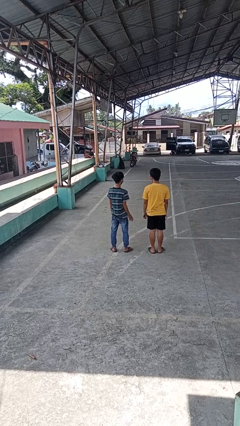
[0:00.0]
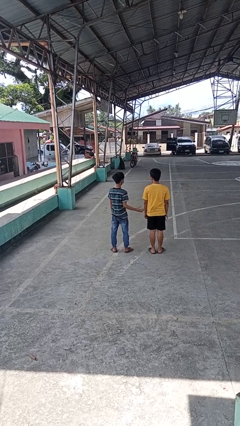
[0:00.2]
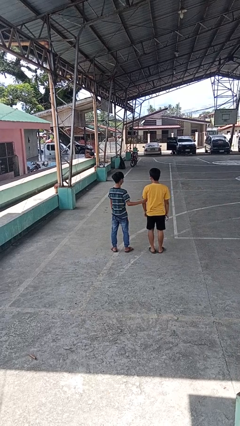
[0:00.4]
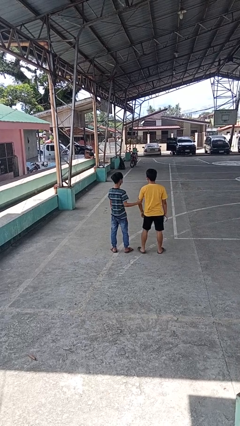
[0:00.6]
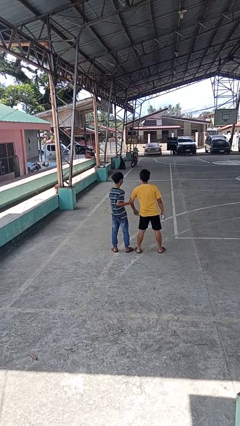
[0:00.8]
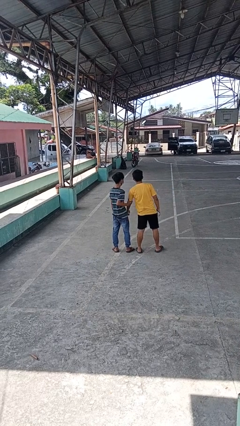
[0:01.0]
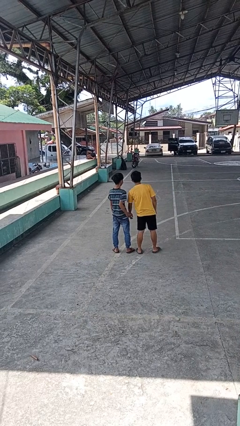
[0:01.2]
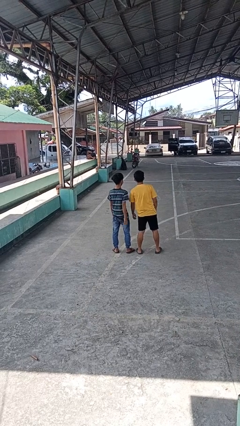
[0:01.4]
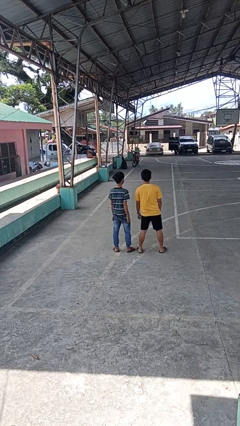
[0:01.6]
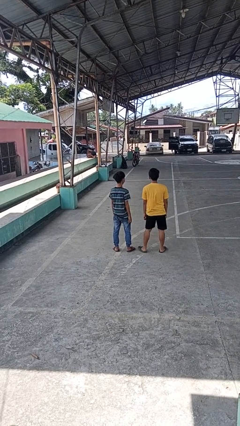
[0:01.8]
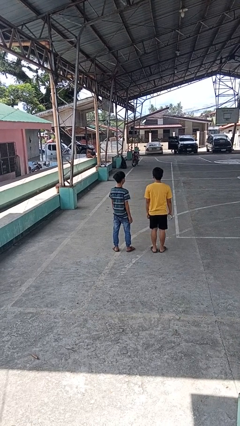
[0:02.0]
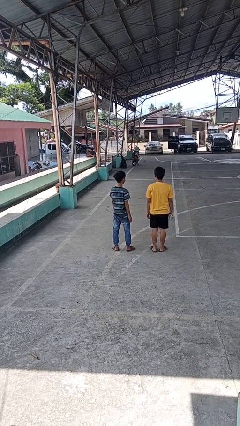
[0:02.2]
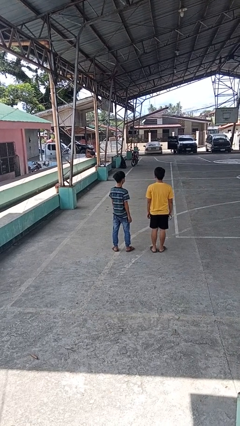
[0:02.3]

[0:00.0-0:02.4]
person grabs person by bicep

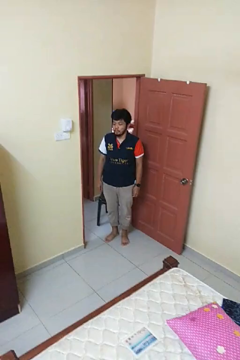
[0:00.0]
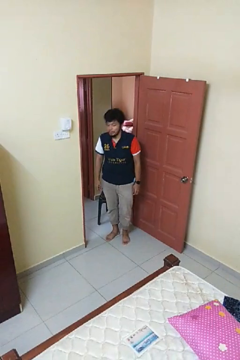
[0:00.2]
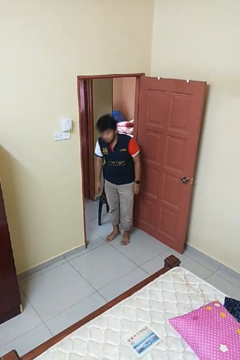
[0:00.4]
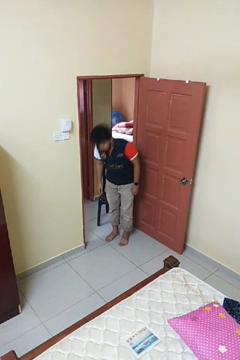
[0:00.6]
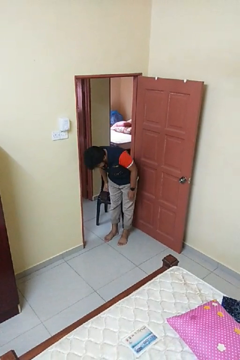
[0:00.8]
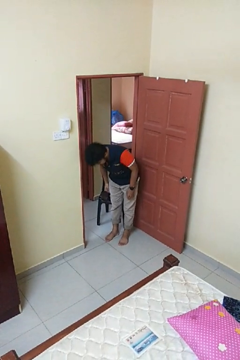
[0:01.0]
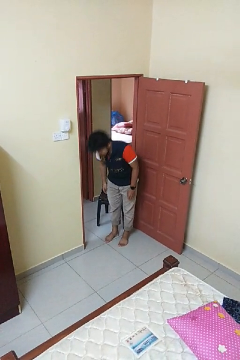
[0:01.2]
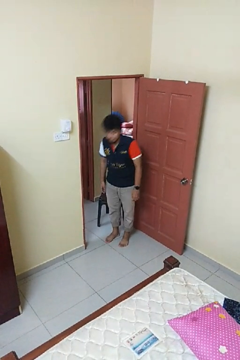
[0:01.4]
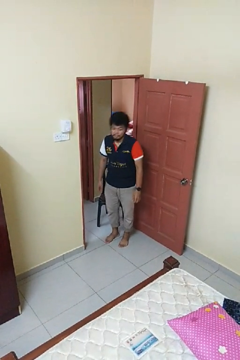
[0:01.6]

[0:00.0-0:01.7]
person bows

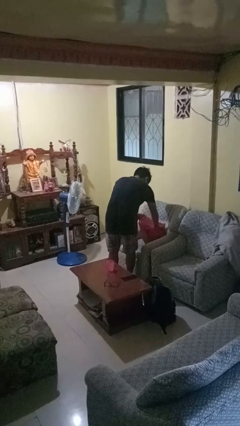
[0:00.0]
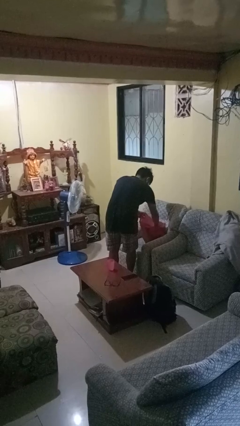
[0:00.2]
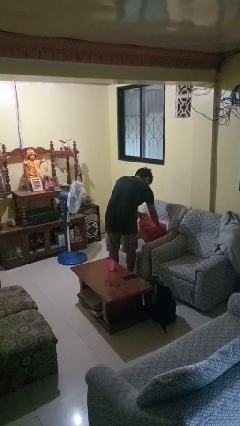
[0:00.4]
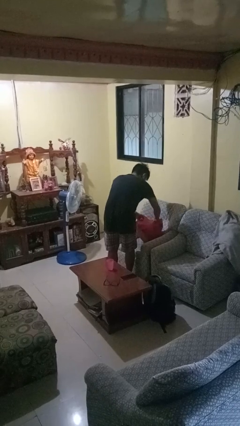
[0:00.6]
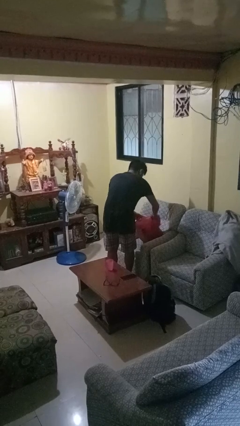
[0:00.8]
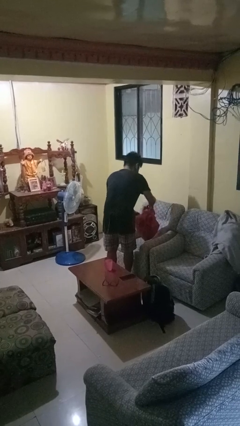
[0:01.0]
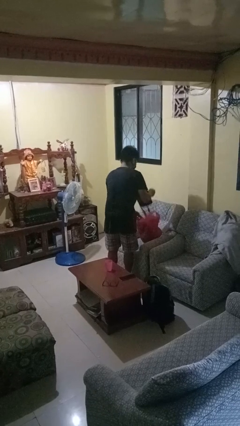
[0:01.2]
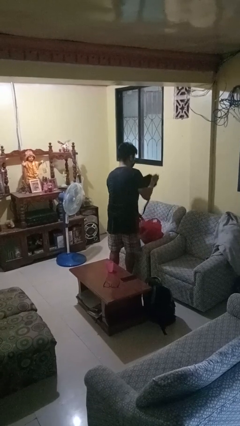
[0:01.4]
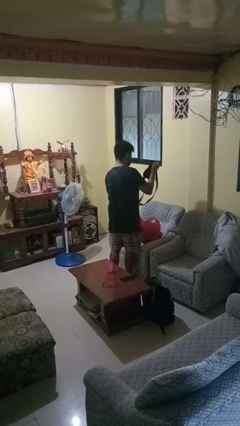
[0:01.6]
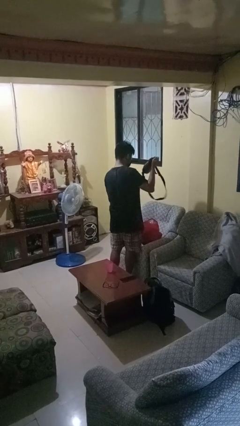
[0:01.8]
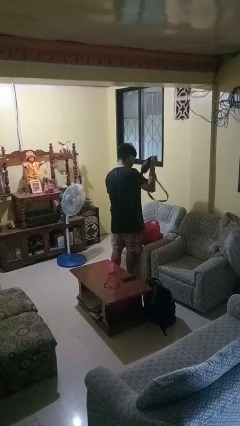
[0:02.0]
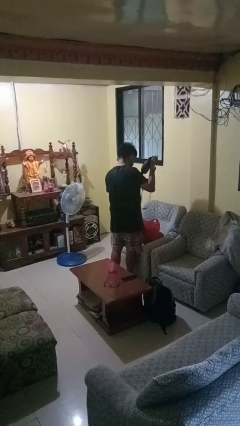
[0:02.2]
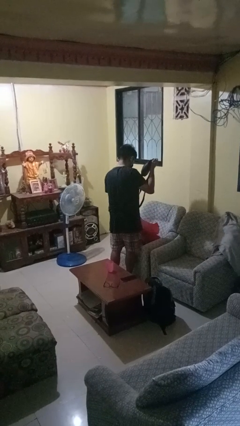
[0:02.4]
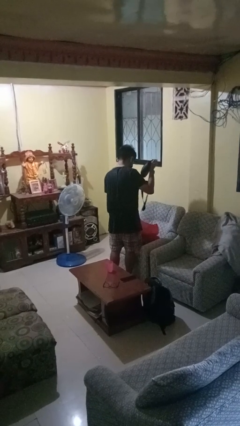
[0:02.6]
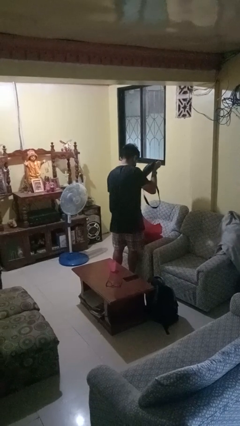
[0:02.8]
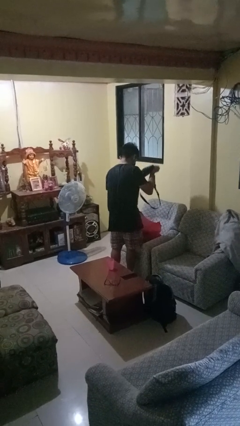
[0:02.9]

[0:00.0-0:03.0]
person takes object from bag

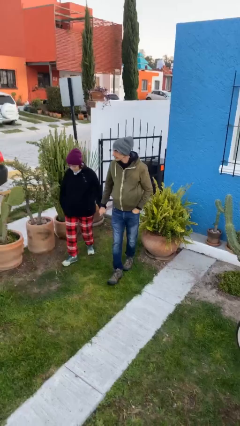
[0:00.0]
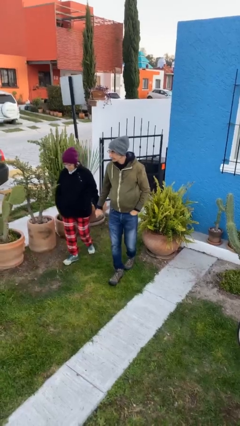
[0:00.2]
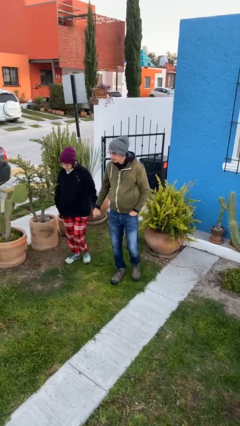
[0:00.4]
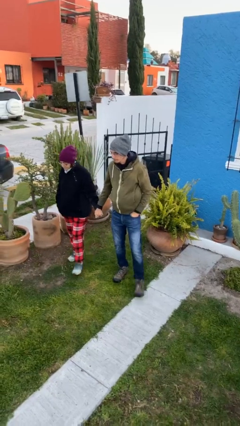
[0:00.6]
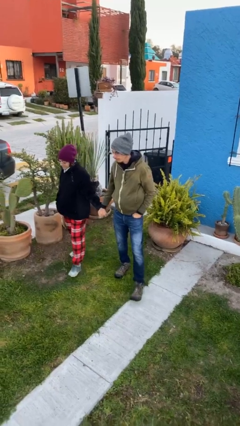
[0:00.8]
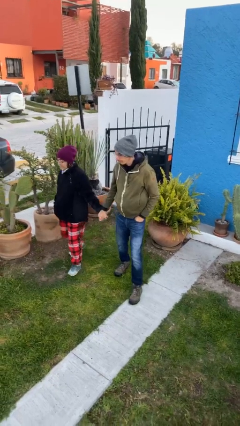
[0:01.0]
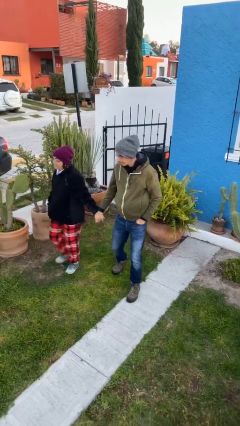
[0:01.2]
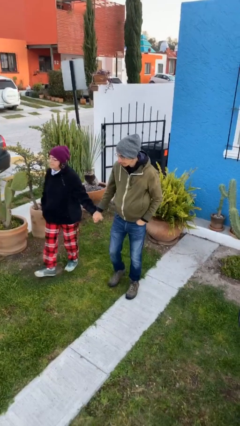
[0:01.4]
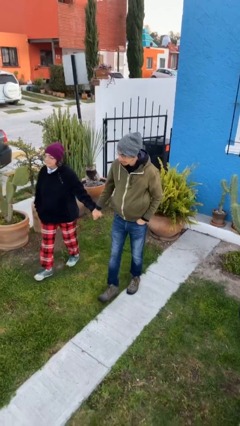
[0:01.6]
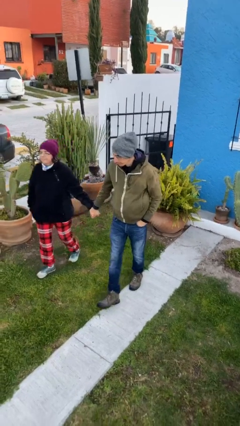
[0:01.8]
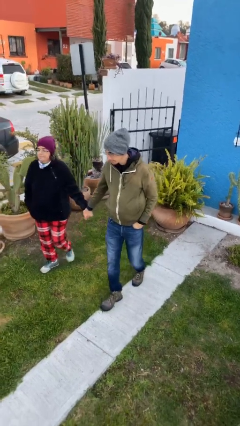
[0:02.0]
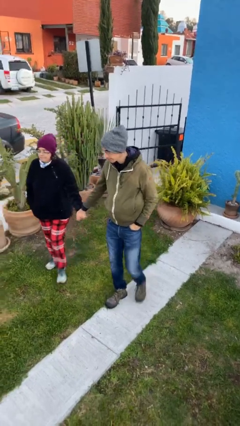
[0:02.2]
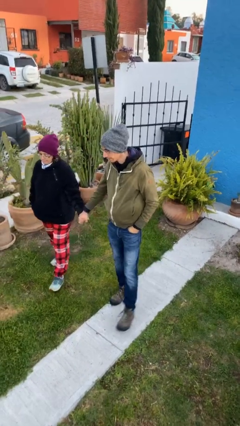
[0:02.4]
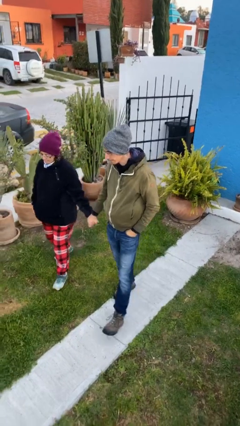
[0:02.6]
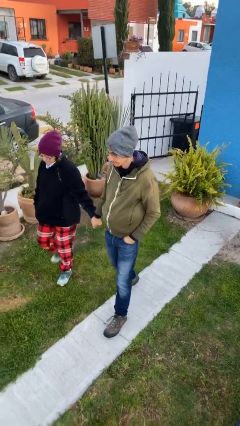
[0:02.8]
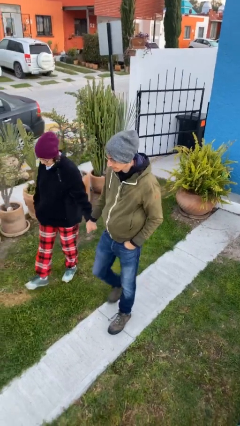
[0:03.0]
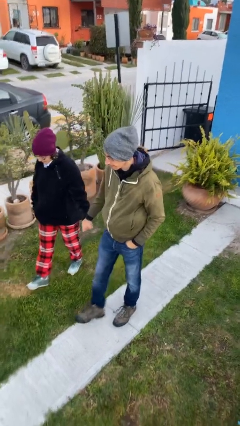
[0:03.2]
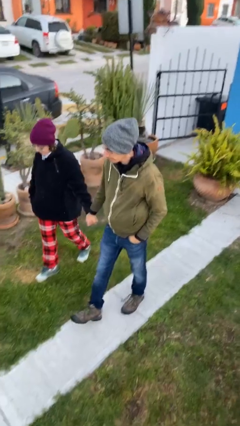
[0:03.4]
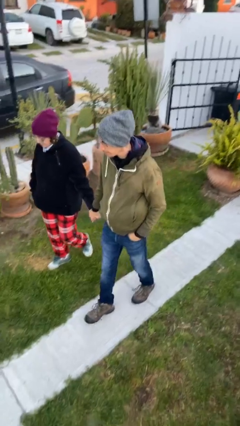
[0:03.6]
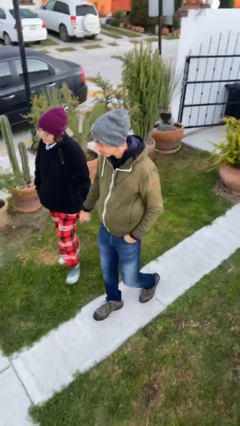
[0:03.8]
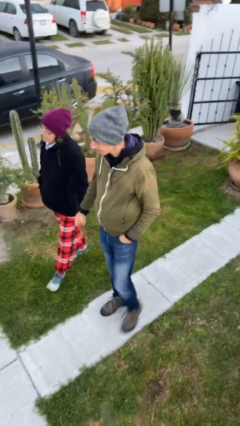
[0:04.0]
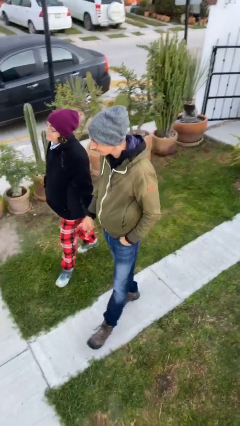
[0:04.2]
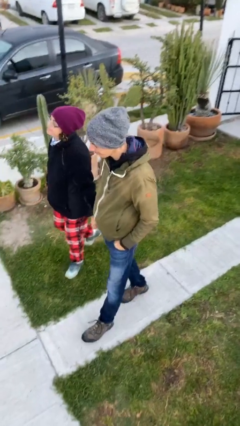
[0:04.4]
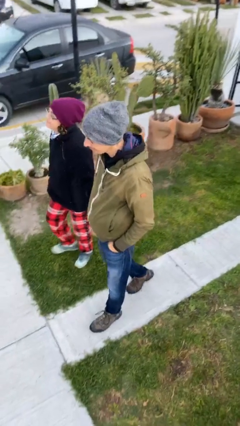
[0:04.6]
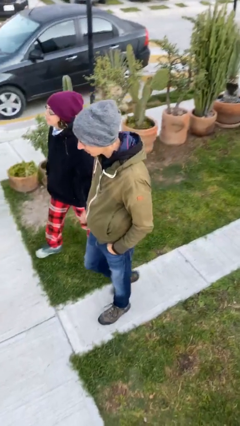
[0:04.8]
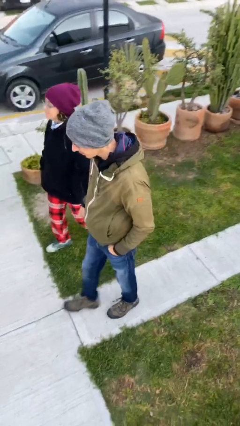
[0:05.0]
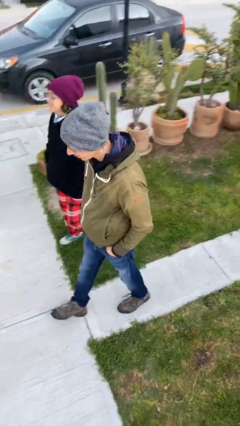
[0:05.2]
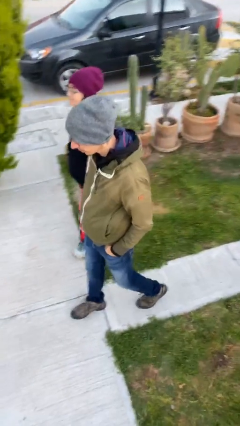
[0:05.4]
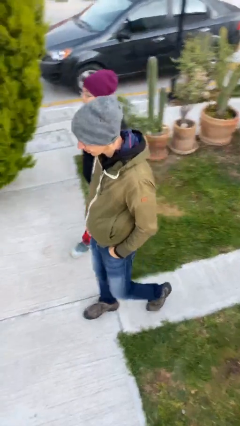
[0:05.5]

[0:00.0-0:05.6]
person holds hand

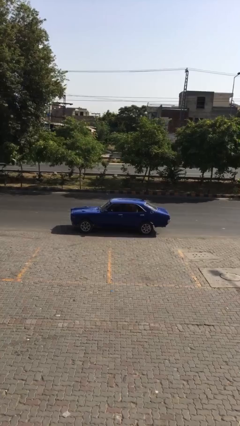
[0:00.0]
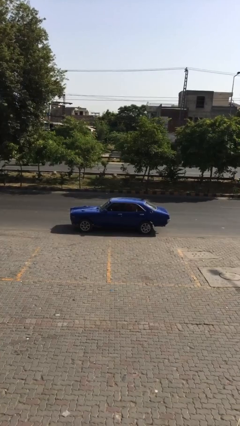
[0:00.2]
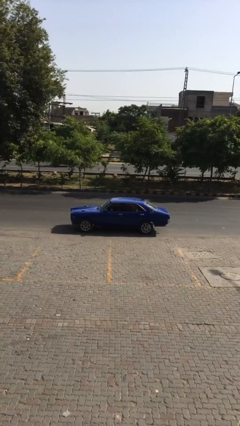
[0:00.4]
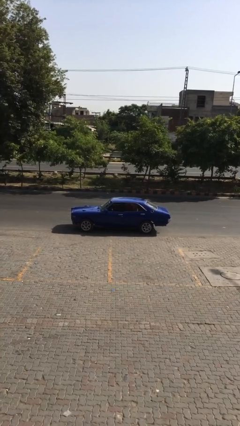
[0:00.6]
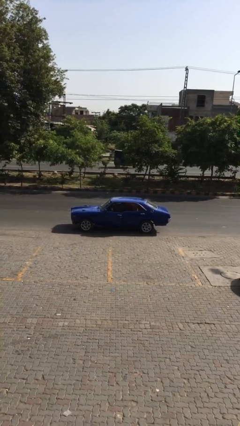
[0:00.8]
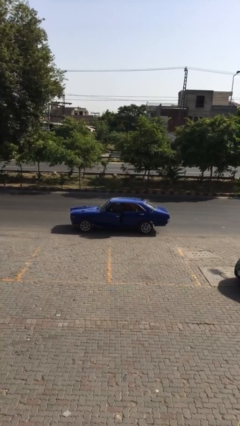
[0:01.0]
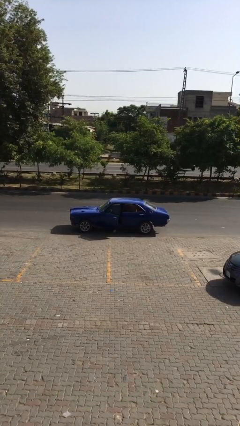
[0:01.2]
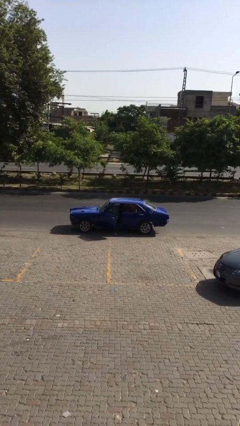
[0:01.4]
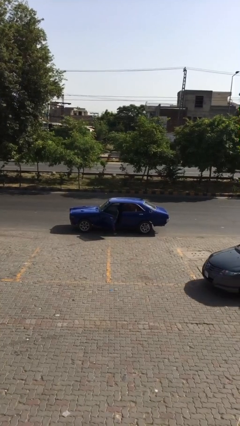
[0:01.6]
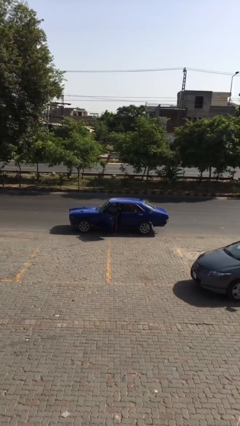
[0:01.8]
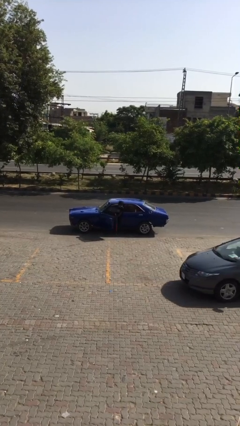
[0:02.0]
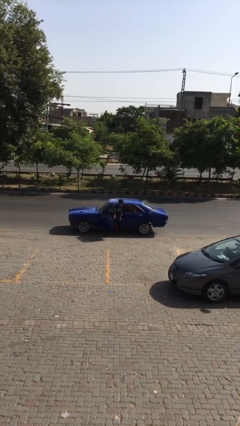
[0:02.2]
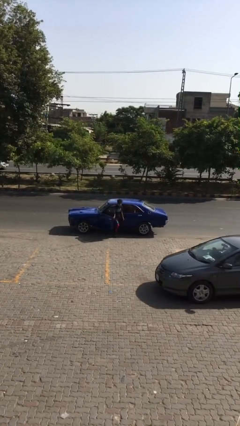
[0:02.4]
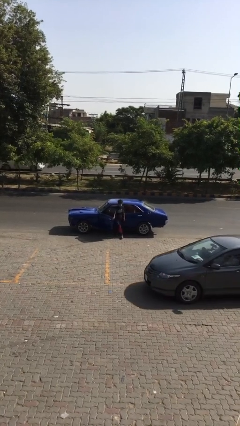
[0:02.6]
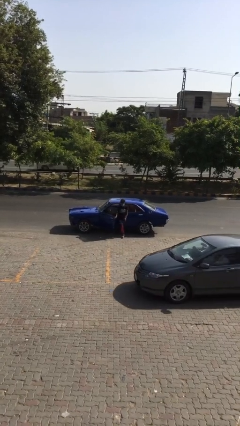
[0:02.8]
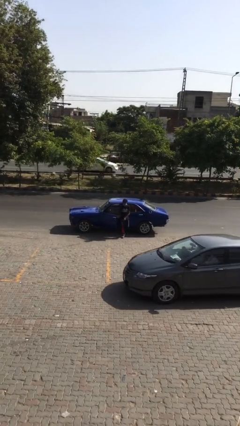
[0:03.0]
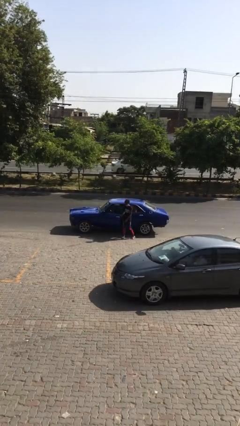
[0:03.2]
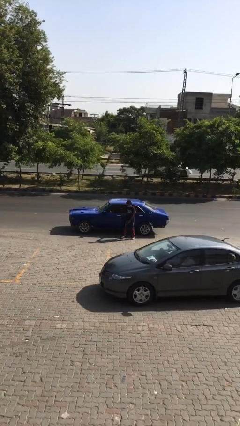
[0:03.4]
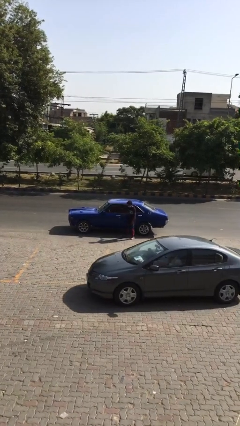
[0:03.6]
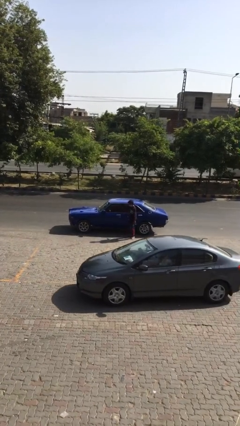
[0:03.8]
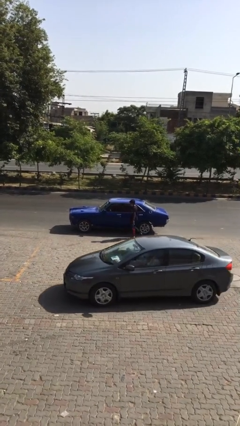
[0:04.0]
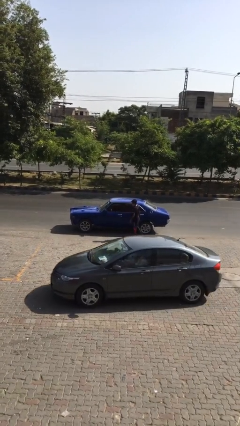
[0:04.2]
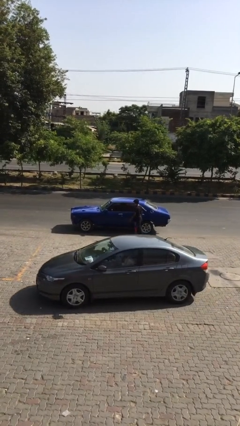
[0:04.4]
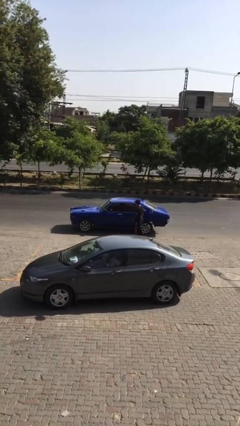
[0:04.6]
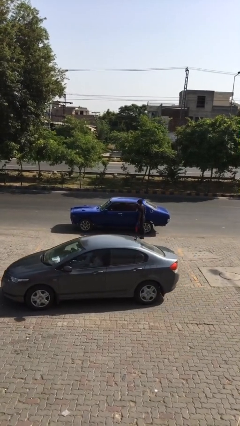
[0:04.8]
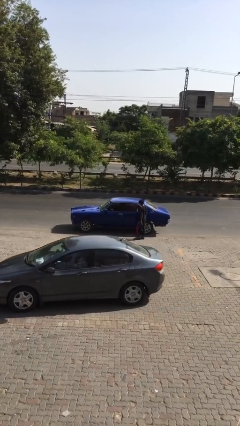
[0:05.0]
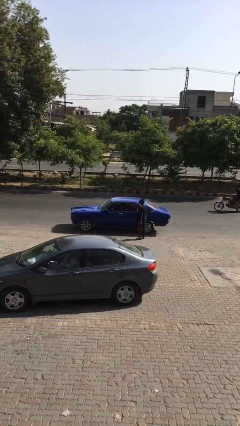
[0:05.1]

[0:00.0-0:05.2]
car drops off person
